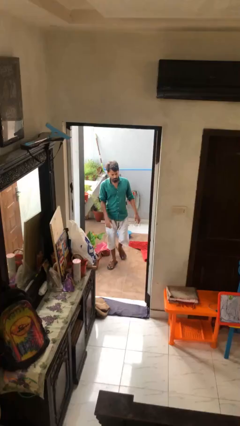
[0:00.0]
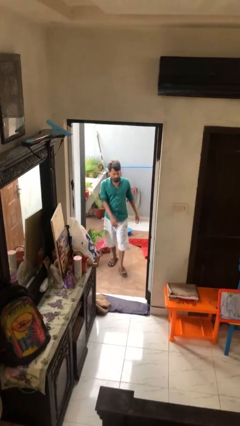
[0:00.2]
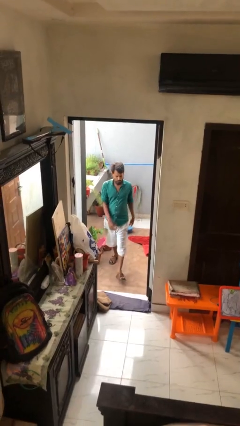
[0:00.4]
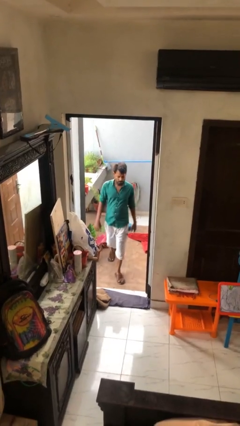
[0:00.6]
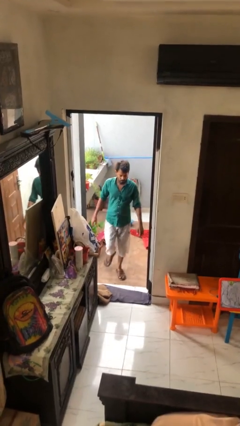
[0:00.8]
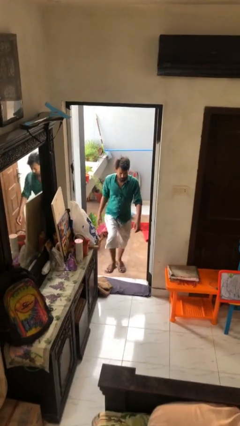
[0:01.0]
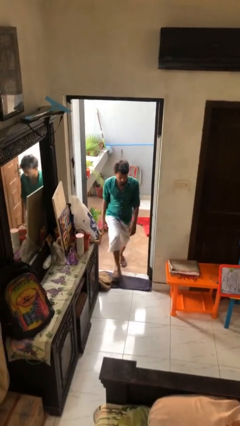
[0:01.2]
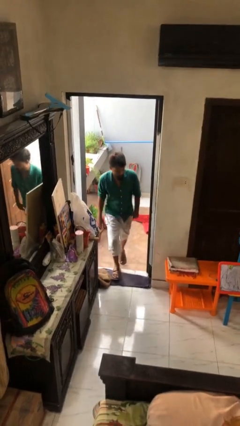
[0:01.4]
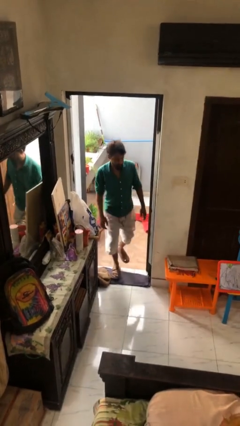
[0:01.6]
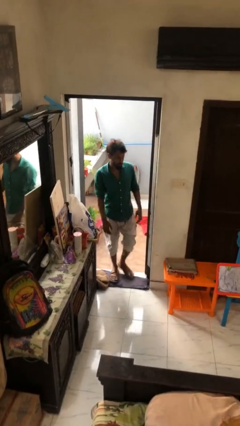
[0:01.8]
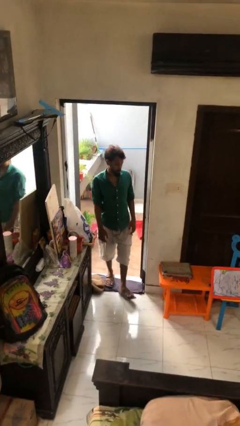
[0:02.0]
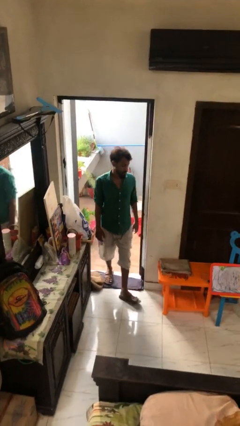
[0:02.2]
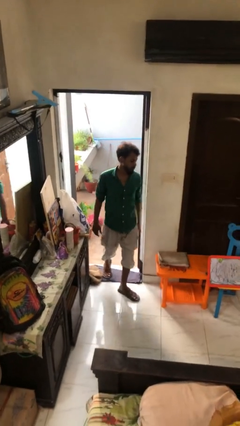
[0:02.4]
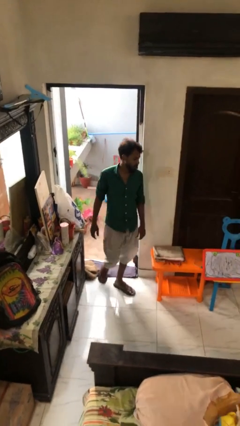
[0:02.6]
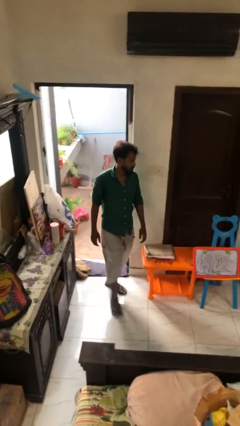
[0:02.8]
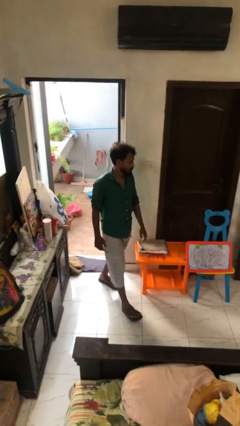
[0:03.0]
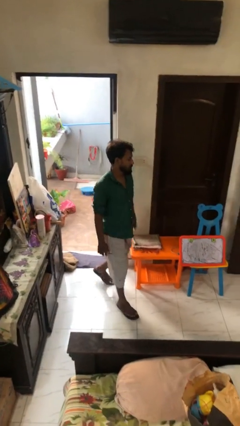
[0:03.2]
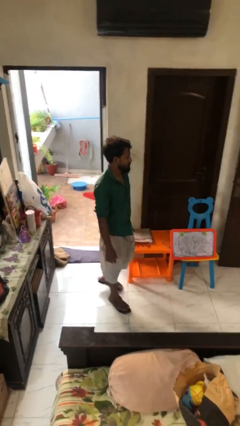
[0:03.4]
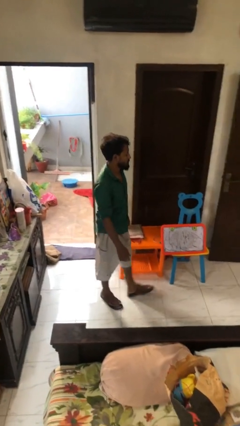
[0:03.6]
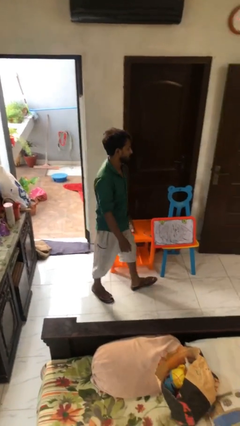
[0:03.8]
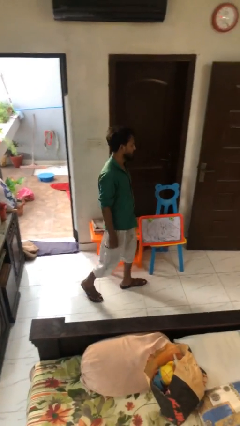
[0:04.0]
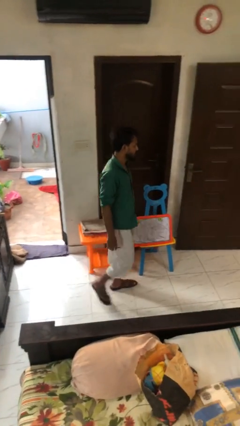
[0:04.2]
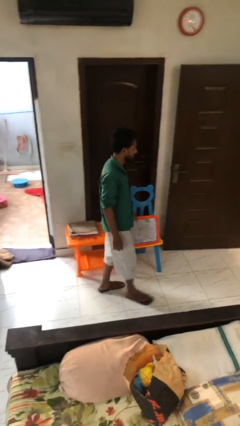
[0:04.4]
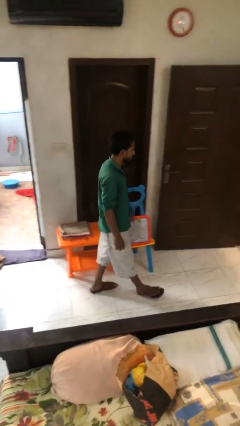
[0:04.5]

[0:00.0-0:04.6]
person enters scene through structure

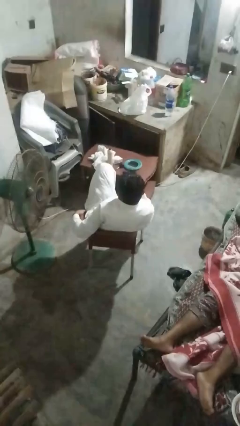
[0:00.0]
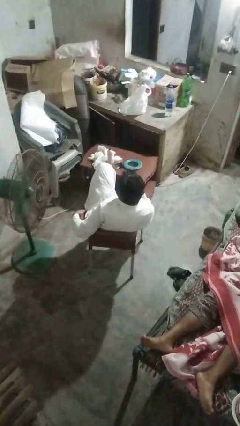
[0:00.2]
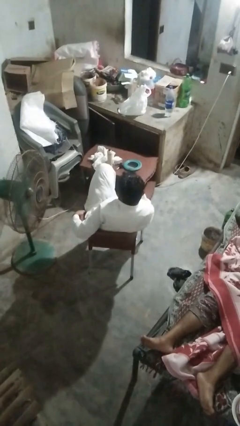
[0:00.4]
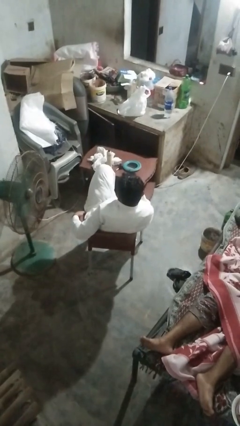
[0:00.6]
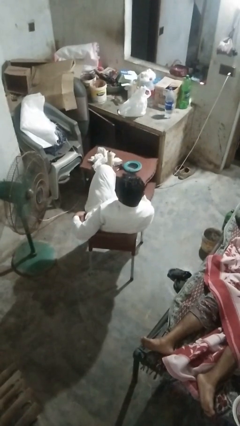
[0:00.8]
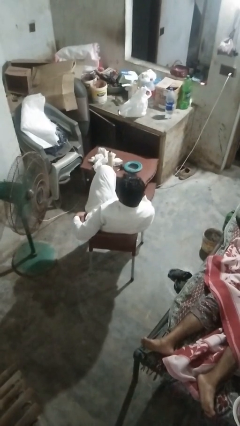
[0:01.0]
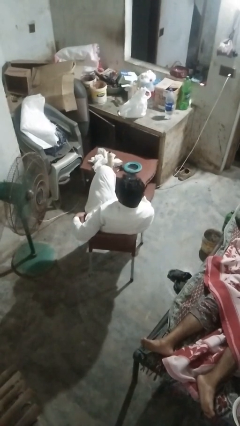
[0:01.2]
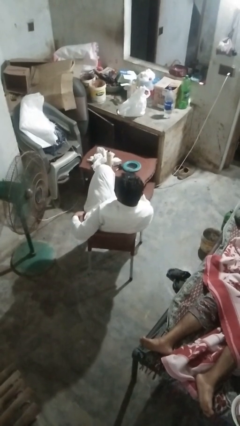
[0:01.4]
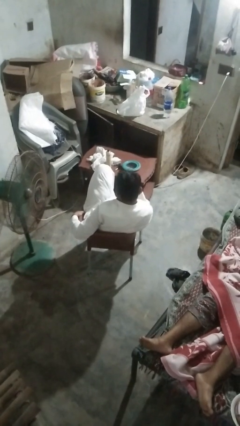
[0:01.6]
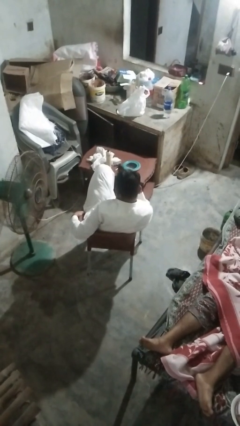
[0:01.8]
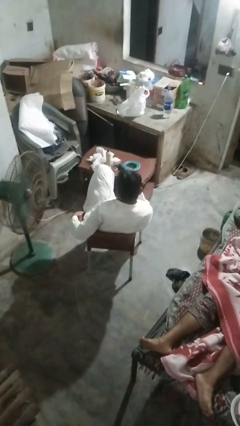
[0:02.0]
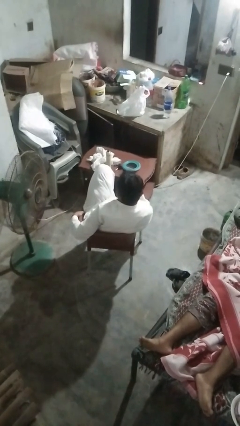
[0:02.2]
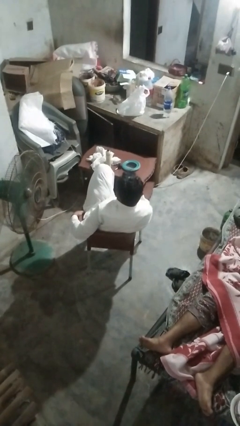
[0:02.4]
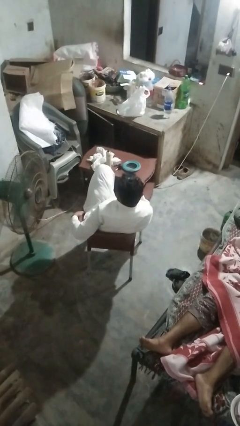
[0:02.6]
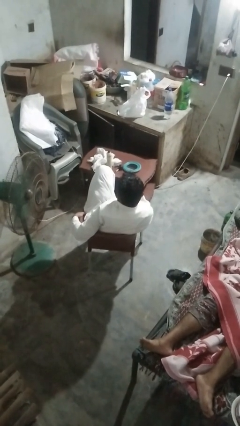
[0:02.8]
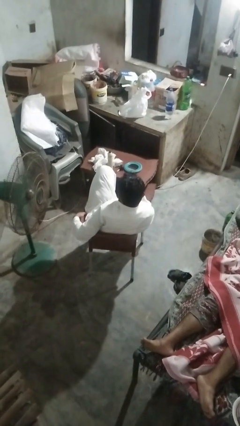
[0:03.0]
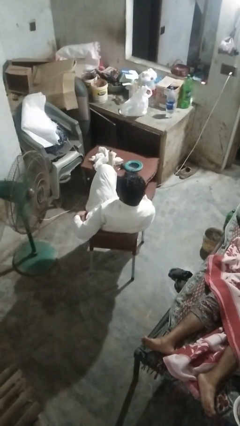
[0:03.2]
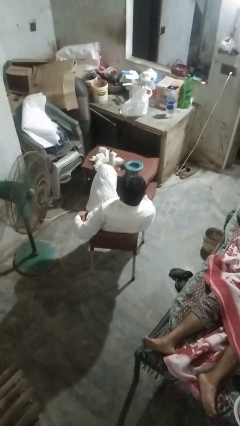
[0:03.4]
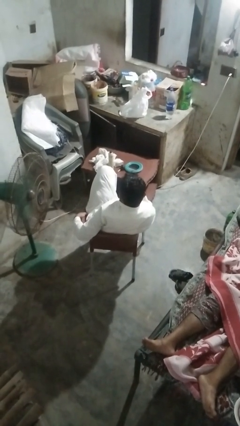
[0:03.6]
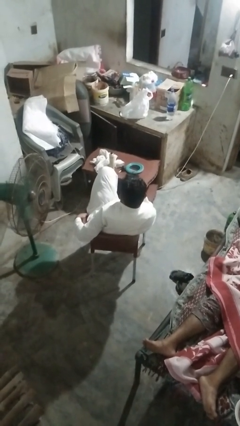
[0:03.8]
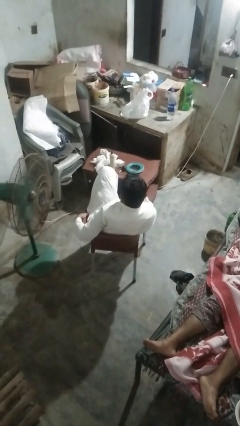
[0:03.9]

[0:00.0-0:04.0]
person nods head

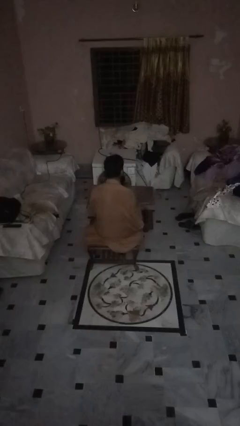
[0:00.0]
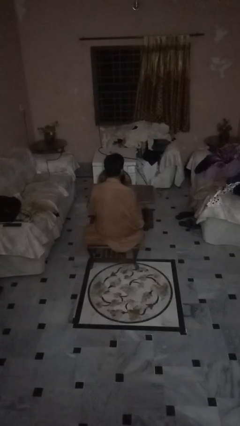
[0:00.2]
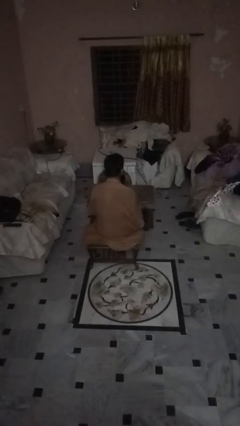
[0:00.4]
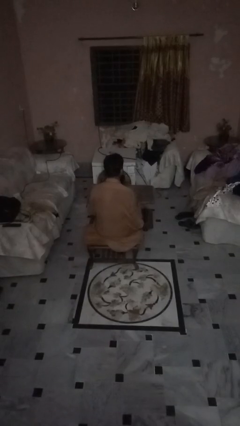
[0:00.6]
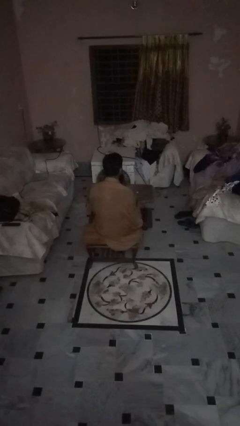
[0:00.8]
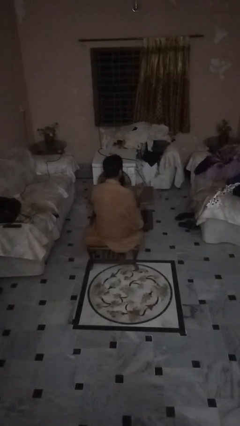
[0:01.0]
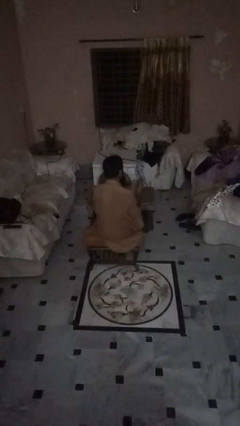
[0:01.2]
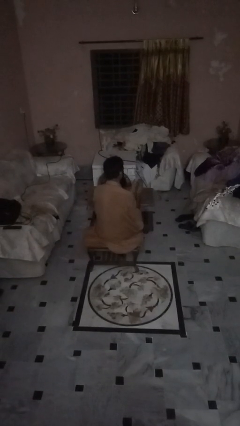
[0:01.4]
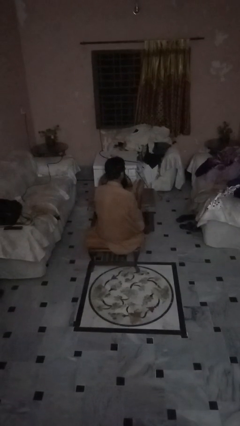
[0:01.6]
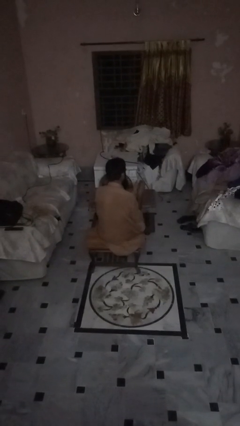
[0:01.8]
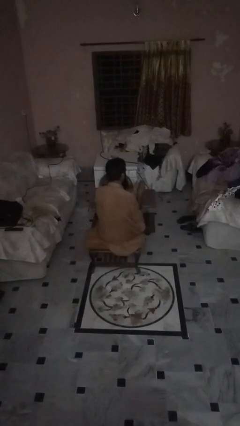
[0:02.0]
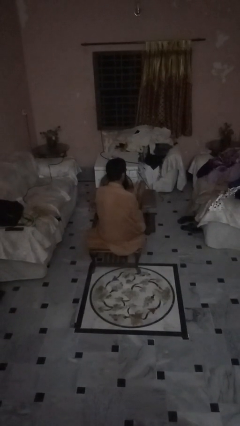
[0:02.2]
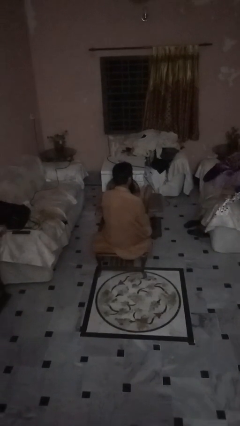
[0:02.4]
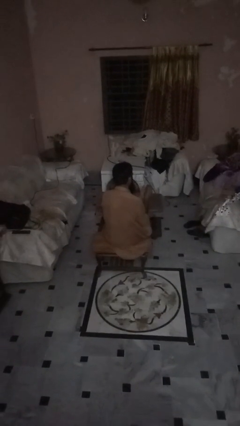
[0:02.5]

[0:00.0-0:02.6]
person clips fingernails

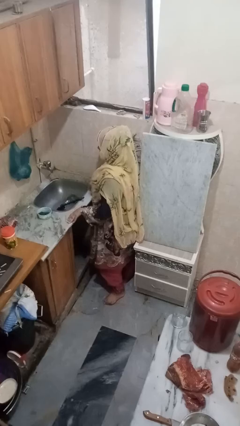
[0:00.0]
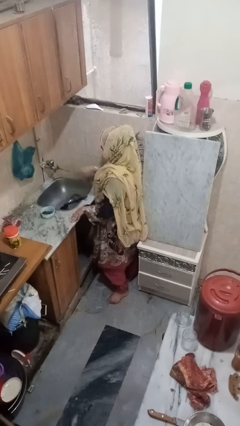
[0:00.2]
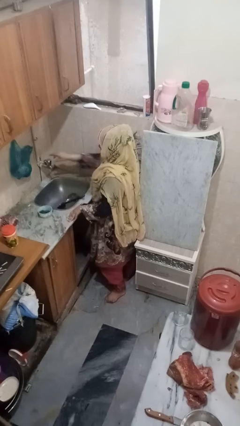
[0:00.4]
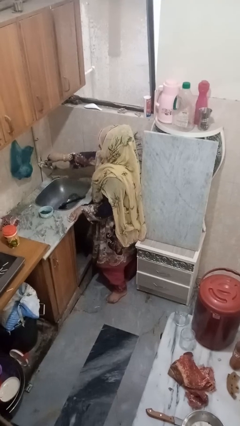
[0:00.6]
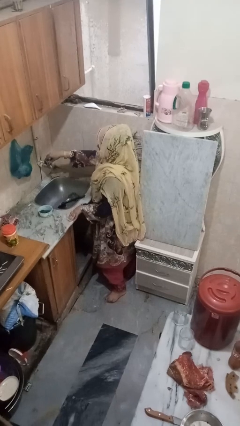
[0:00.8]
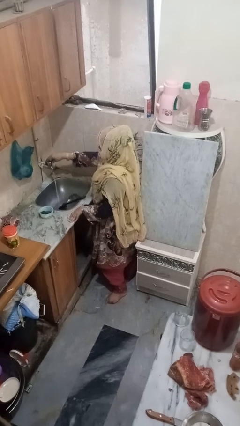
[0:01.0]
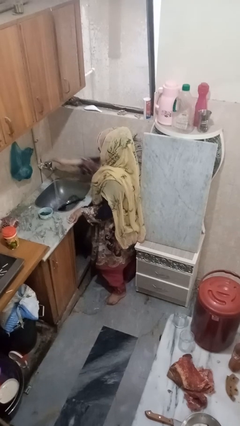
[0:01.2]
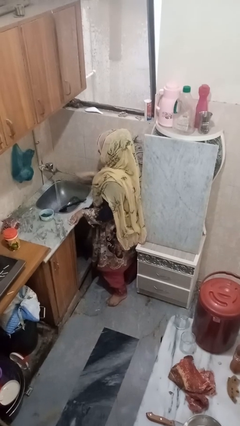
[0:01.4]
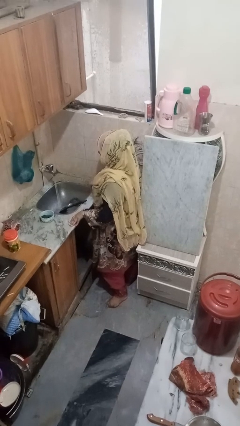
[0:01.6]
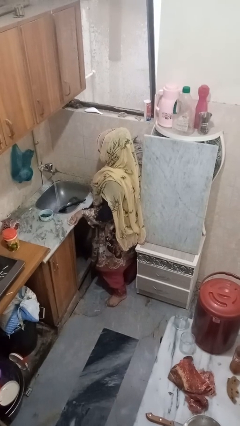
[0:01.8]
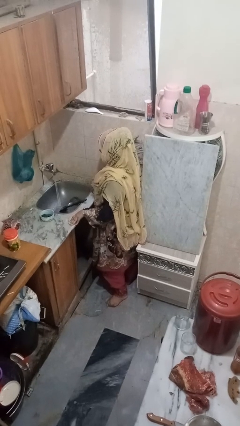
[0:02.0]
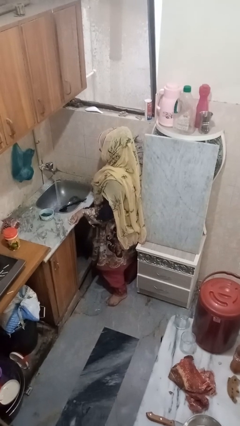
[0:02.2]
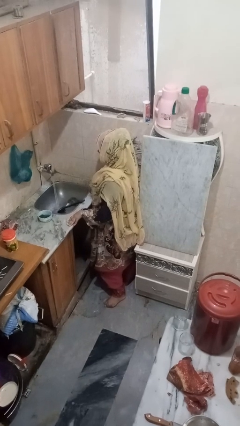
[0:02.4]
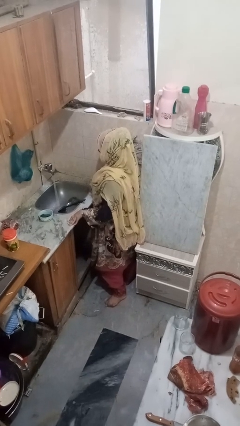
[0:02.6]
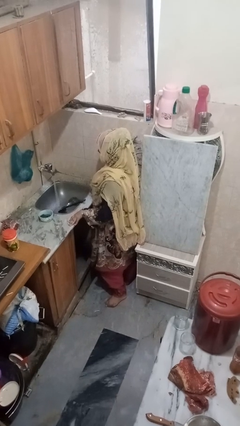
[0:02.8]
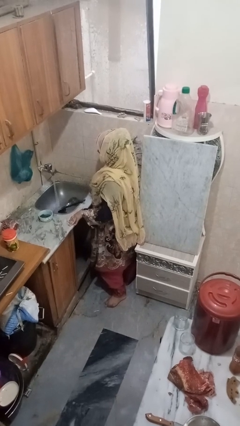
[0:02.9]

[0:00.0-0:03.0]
person turns on faucet

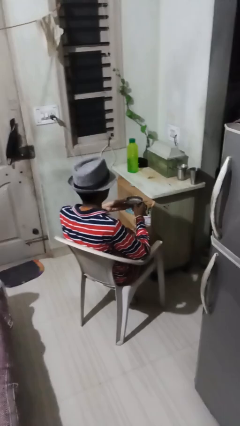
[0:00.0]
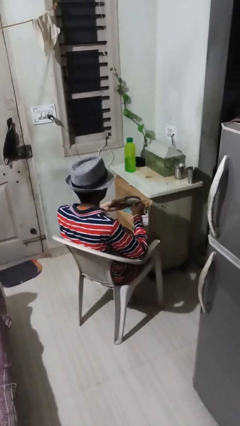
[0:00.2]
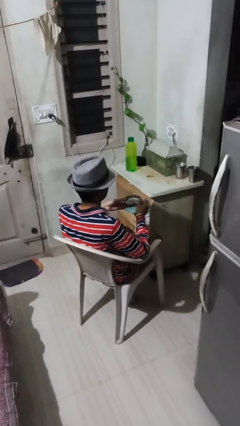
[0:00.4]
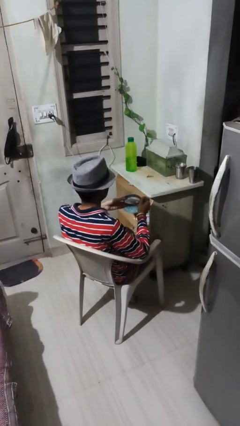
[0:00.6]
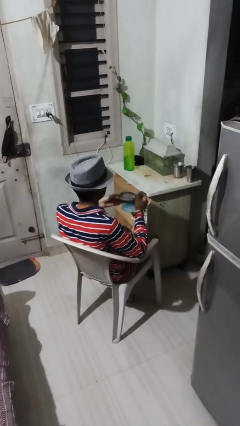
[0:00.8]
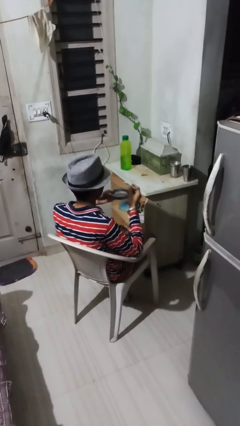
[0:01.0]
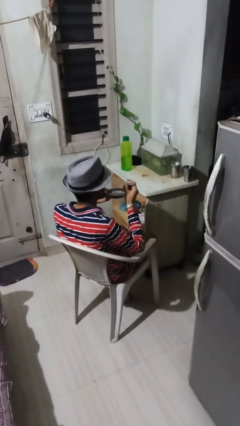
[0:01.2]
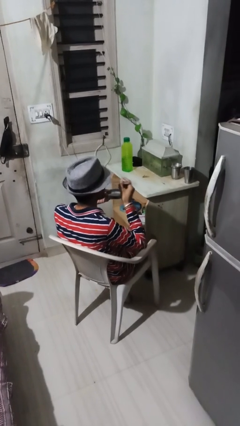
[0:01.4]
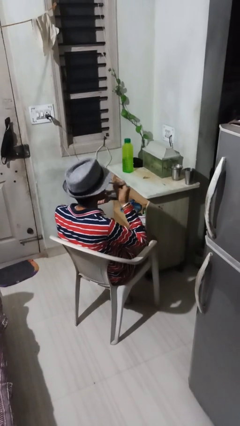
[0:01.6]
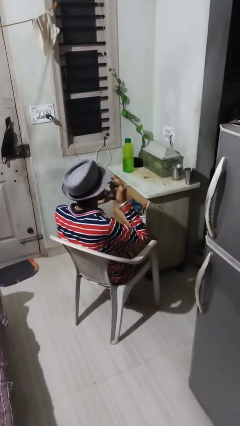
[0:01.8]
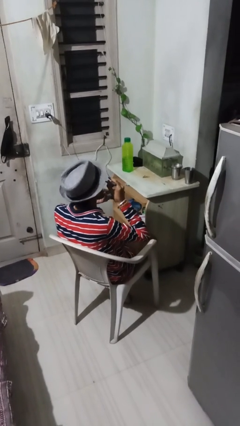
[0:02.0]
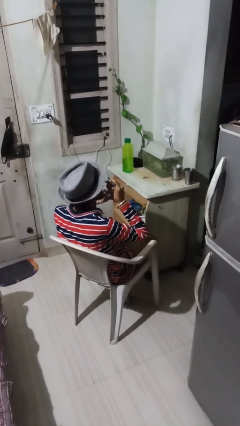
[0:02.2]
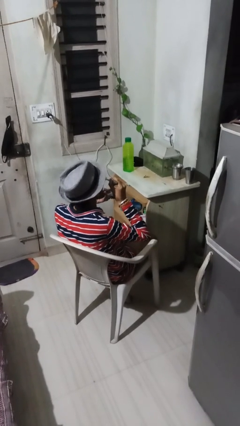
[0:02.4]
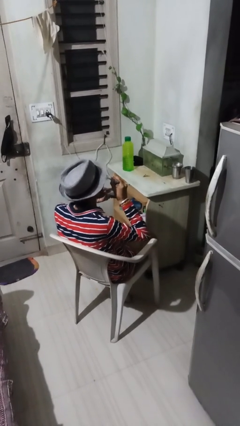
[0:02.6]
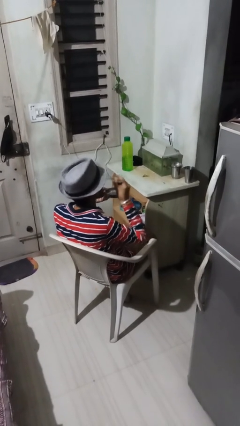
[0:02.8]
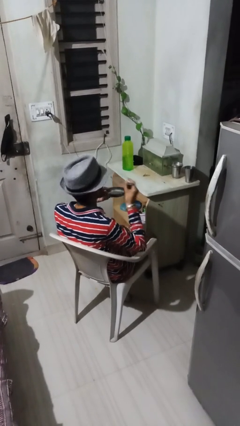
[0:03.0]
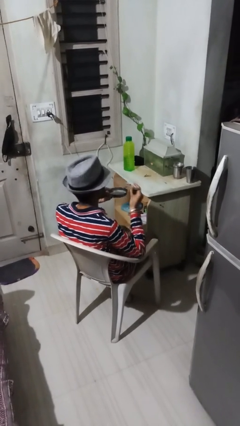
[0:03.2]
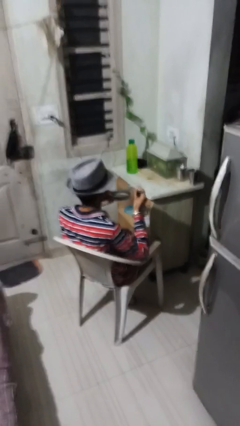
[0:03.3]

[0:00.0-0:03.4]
person eats with utensil
